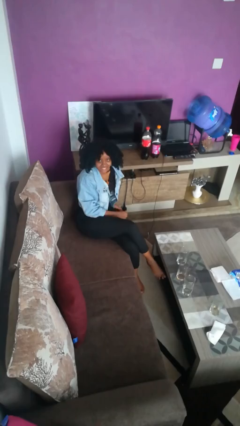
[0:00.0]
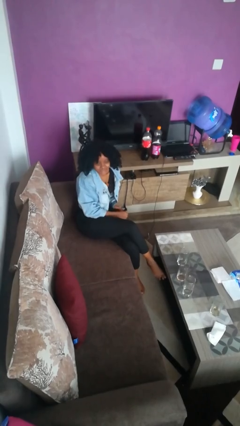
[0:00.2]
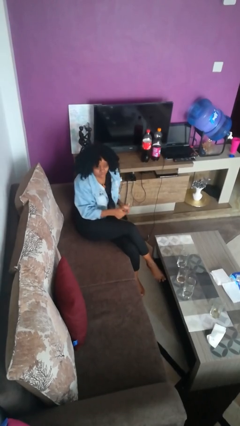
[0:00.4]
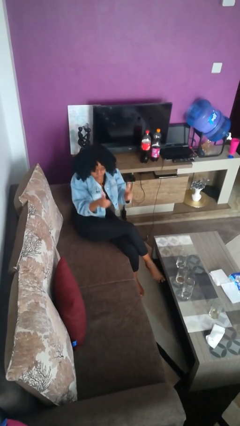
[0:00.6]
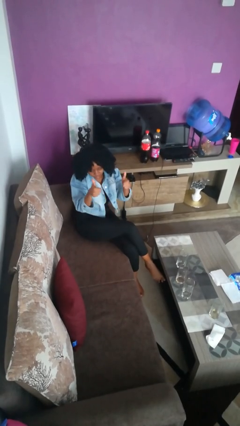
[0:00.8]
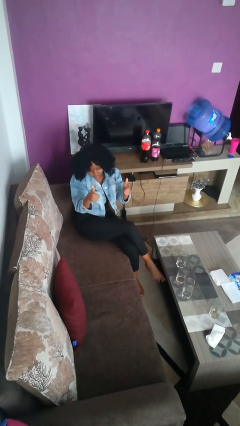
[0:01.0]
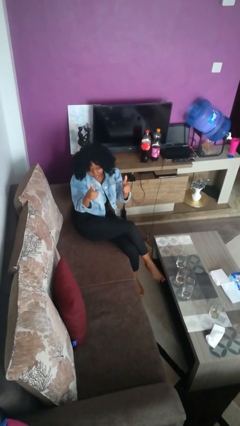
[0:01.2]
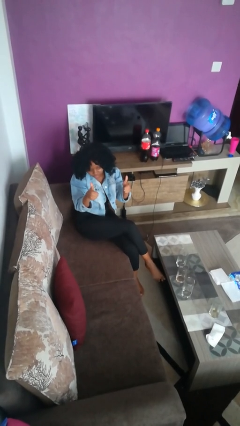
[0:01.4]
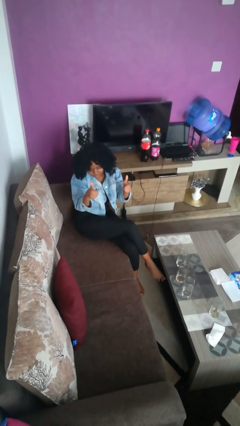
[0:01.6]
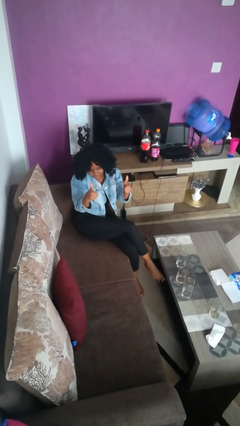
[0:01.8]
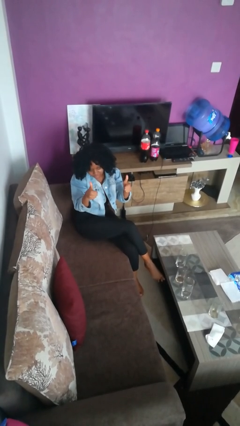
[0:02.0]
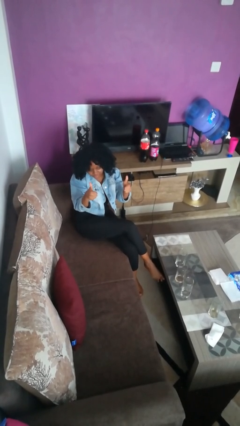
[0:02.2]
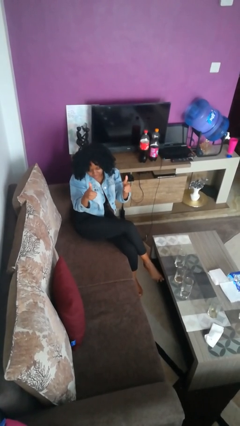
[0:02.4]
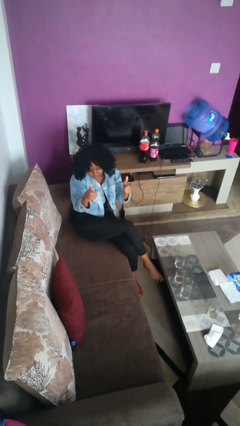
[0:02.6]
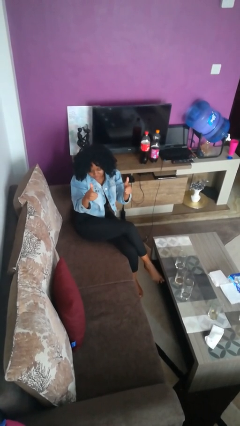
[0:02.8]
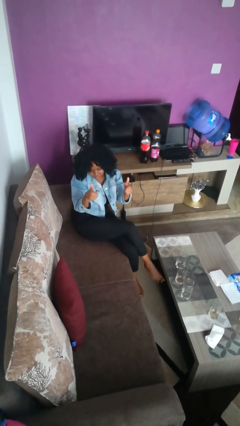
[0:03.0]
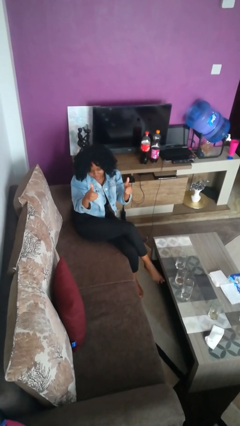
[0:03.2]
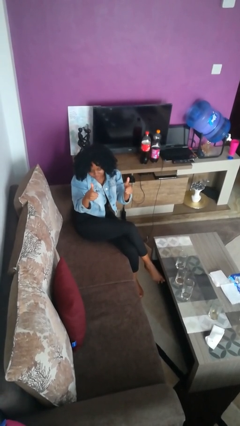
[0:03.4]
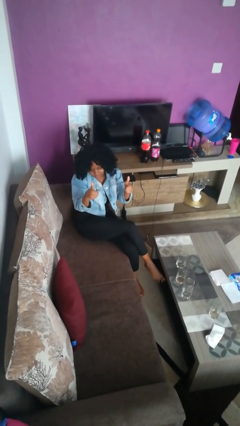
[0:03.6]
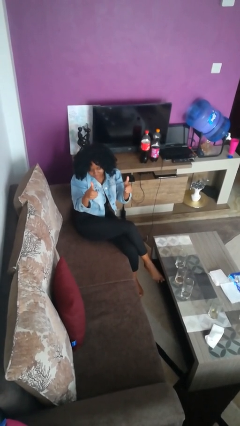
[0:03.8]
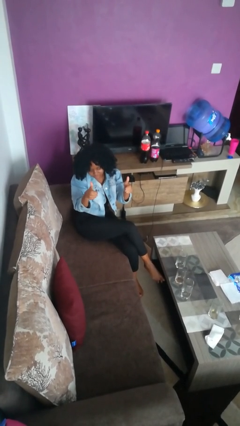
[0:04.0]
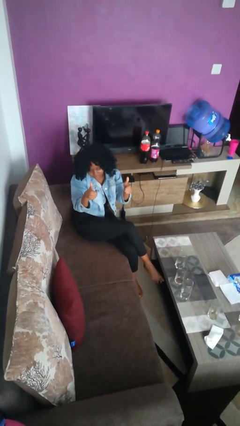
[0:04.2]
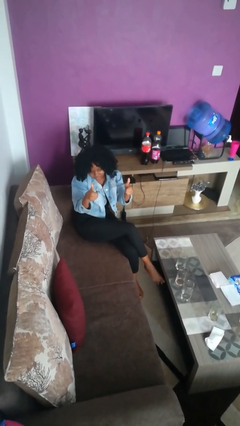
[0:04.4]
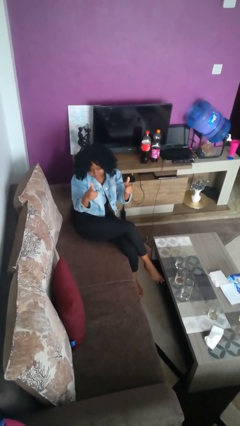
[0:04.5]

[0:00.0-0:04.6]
person gestures thumbs up

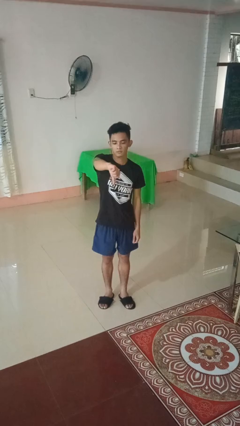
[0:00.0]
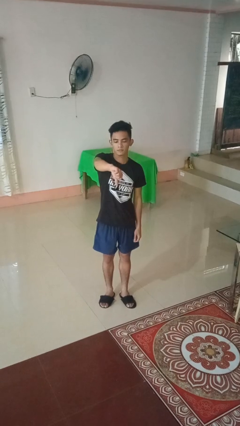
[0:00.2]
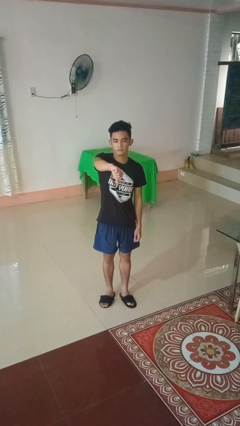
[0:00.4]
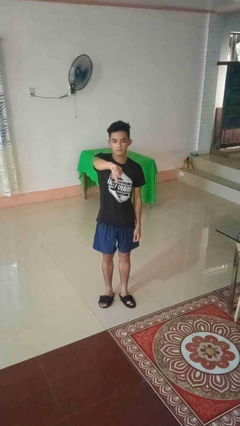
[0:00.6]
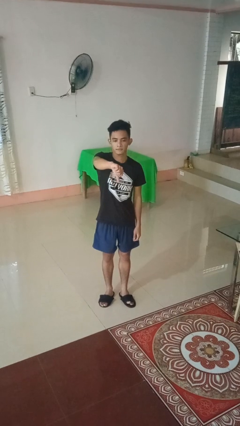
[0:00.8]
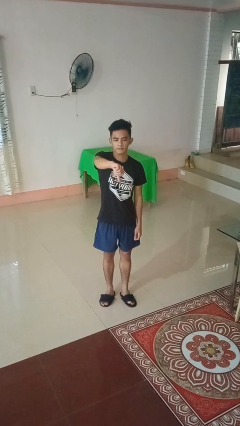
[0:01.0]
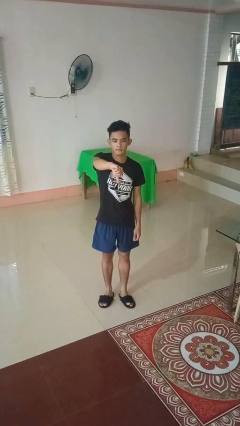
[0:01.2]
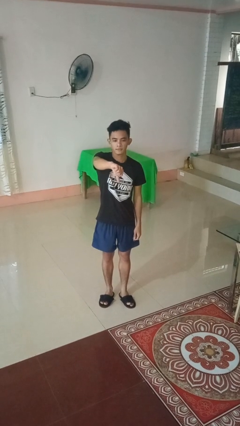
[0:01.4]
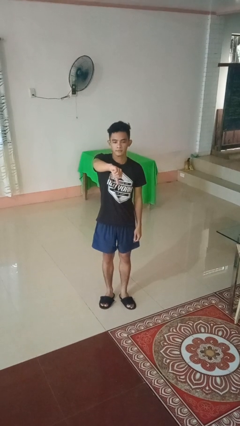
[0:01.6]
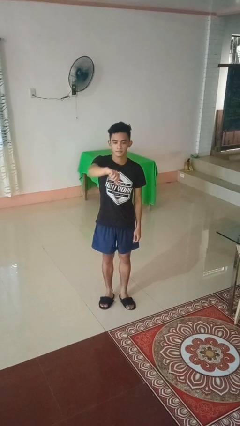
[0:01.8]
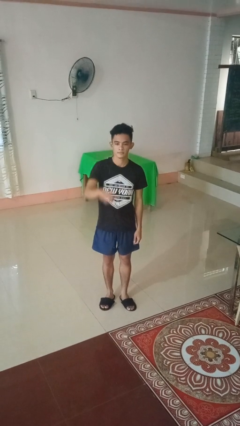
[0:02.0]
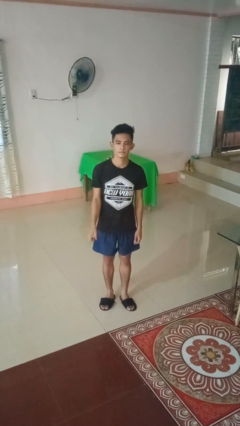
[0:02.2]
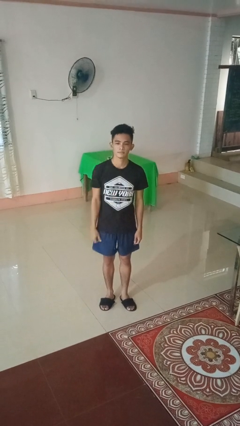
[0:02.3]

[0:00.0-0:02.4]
person gestures thumbs down

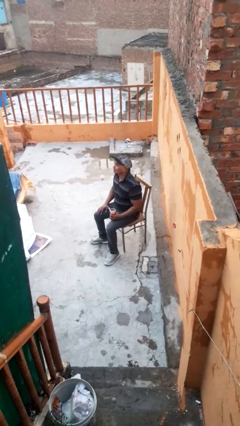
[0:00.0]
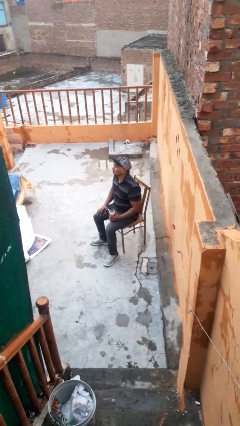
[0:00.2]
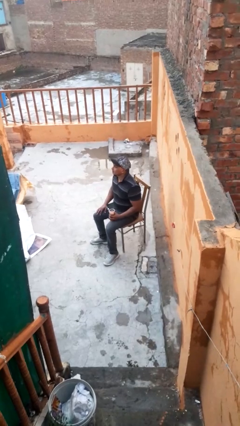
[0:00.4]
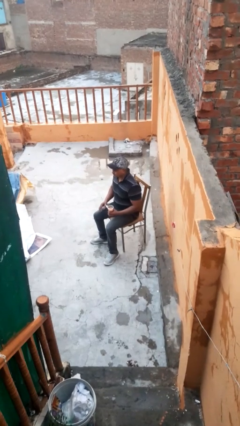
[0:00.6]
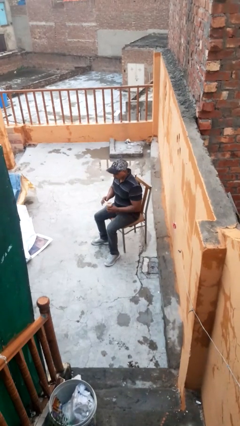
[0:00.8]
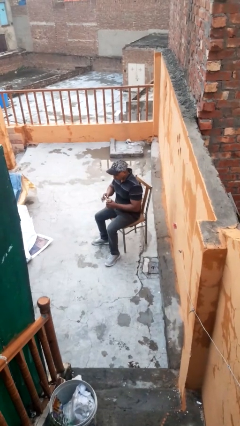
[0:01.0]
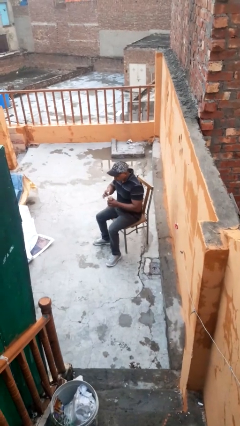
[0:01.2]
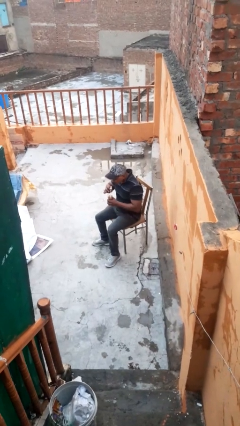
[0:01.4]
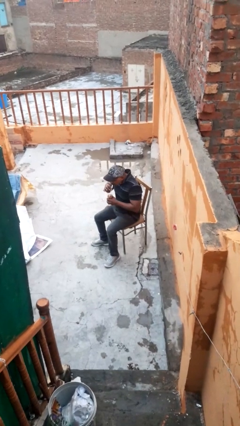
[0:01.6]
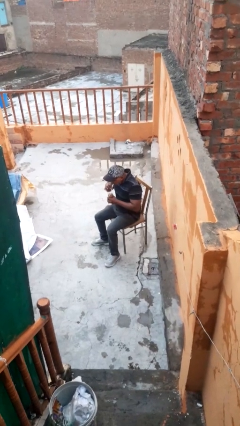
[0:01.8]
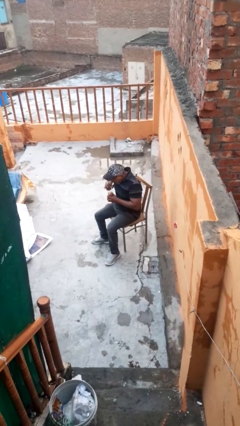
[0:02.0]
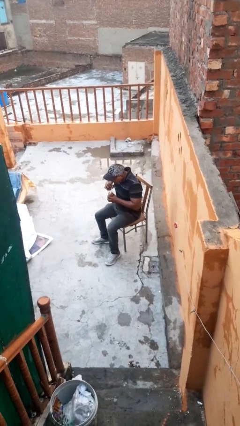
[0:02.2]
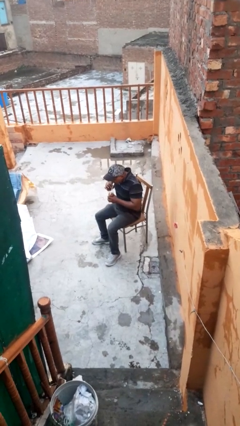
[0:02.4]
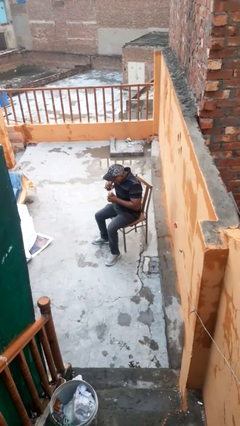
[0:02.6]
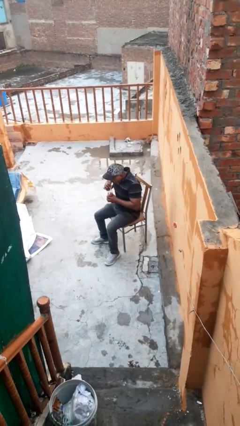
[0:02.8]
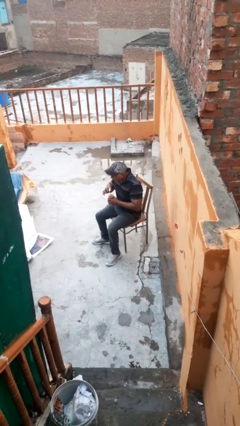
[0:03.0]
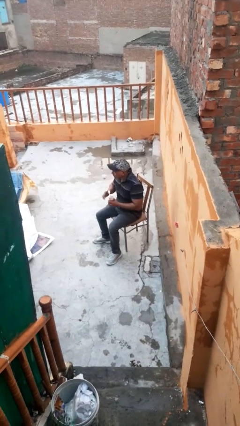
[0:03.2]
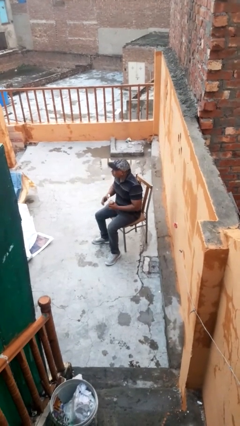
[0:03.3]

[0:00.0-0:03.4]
person drinks from straw

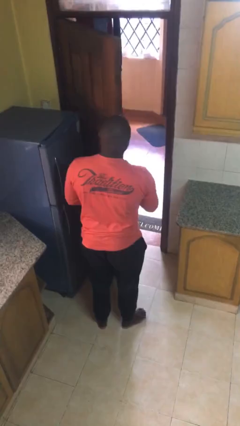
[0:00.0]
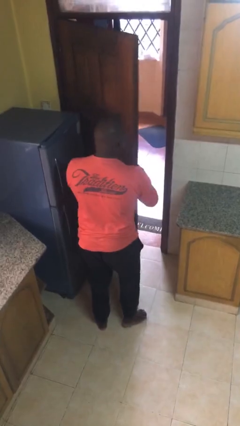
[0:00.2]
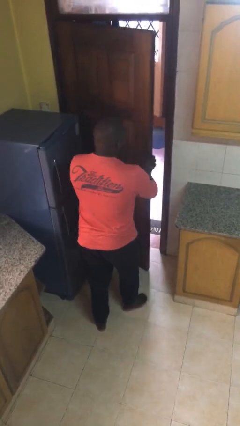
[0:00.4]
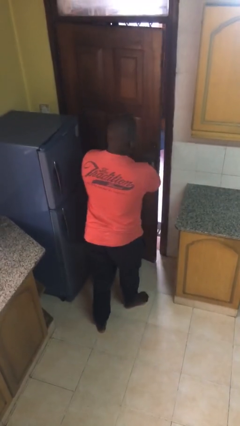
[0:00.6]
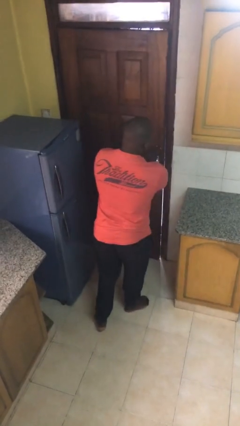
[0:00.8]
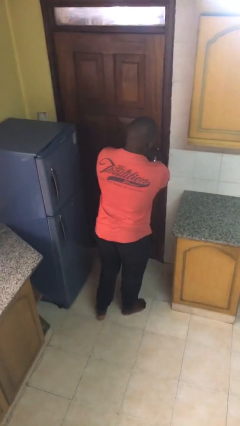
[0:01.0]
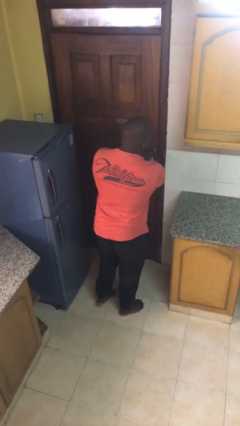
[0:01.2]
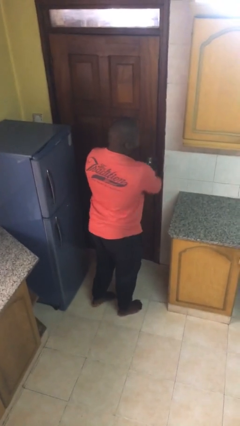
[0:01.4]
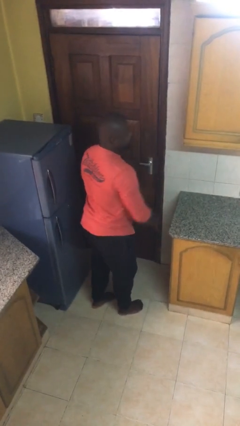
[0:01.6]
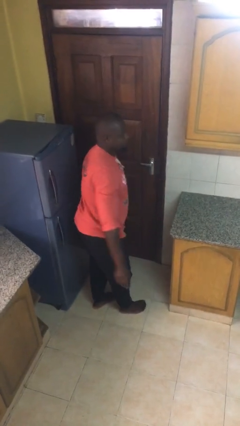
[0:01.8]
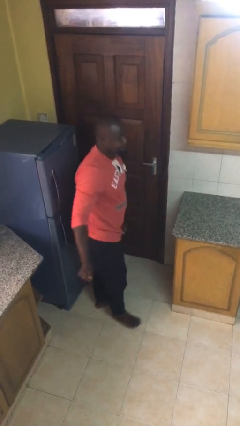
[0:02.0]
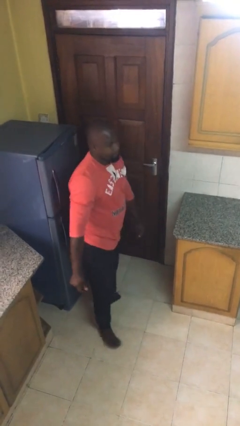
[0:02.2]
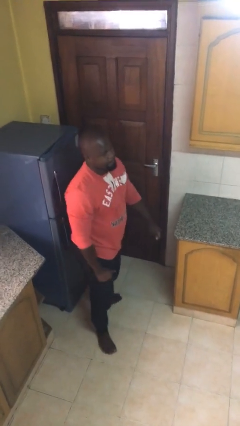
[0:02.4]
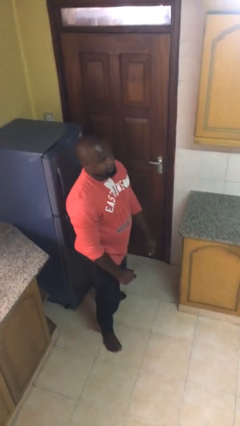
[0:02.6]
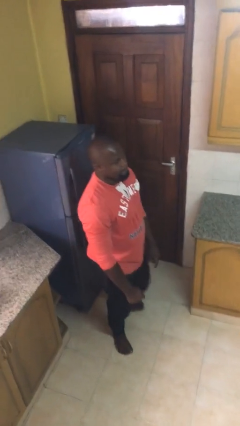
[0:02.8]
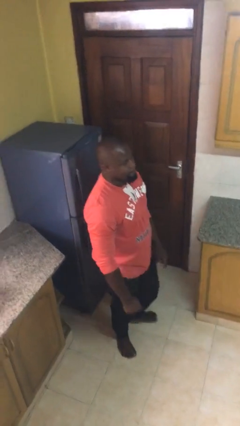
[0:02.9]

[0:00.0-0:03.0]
person closes facility door

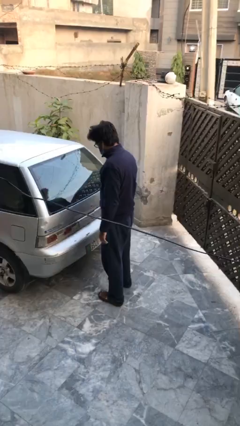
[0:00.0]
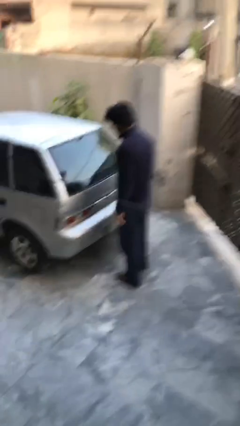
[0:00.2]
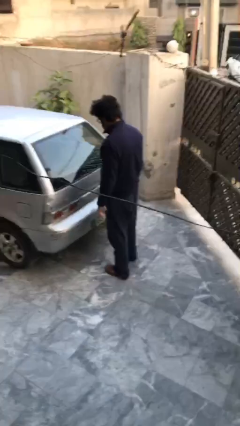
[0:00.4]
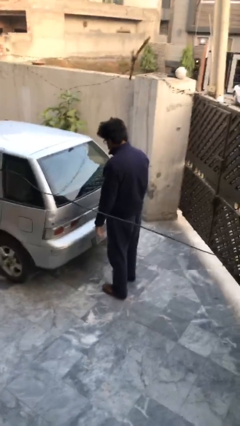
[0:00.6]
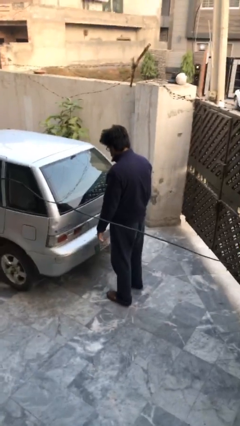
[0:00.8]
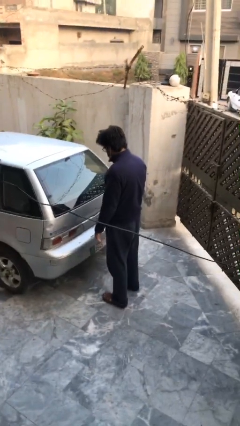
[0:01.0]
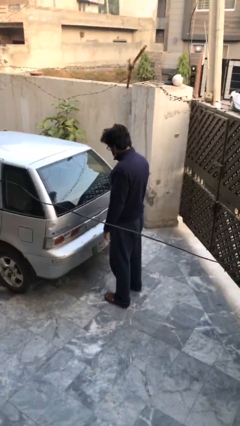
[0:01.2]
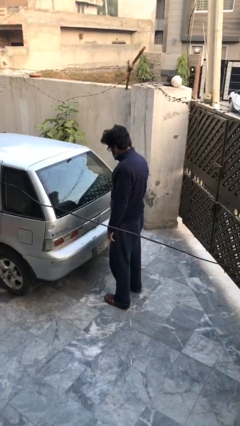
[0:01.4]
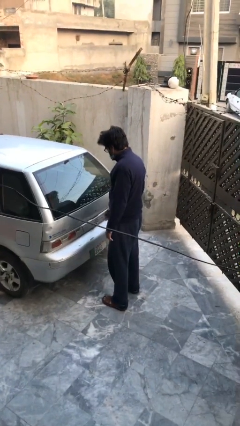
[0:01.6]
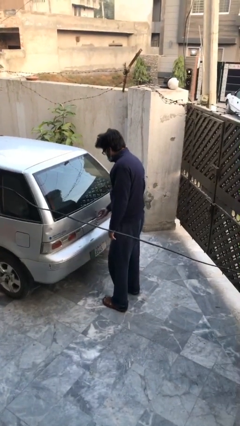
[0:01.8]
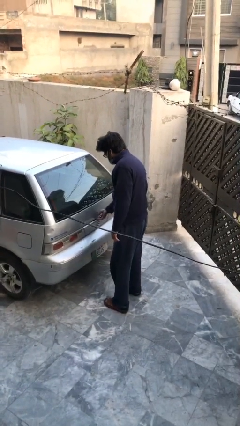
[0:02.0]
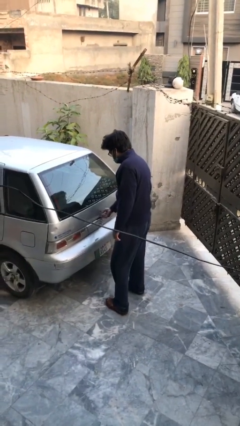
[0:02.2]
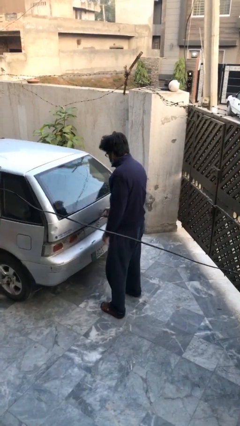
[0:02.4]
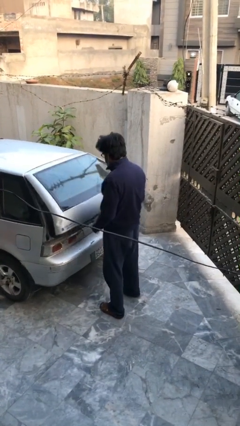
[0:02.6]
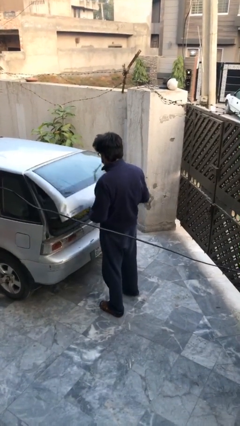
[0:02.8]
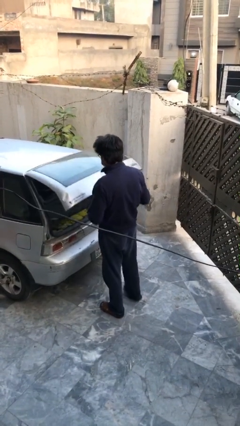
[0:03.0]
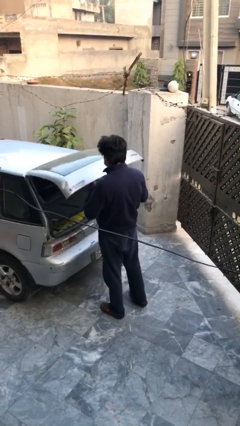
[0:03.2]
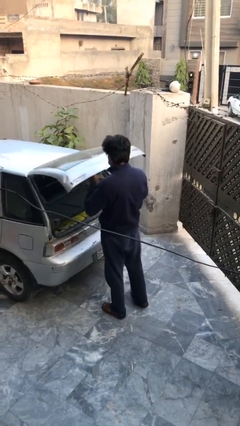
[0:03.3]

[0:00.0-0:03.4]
person opens car trunk

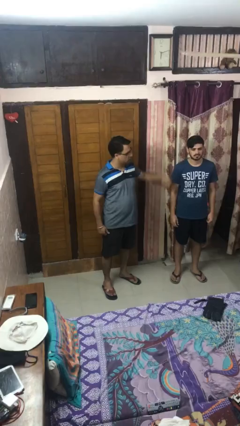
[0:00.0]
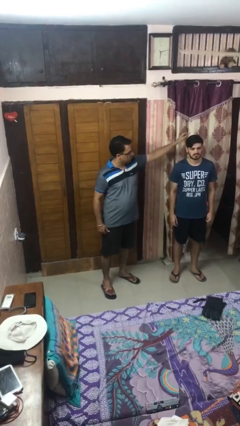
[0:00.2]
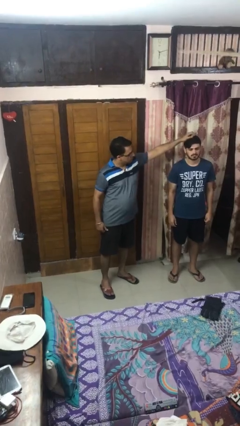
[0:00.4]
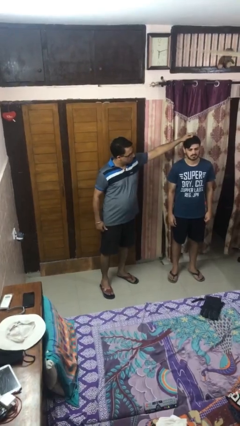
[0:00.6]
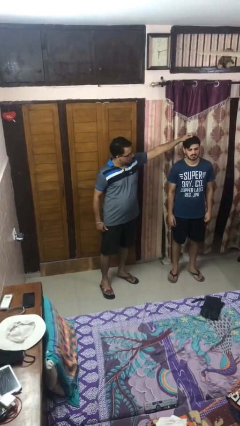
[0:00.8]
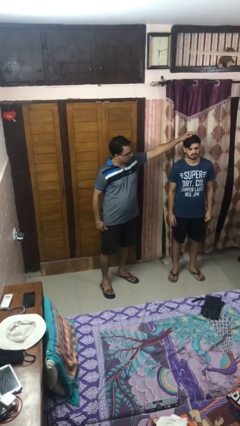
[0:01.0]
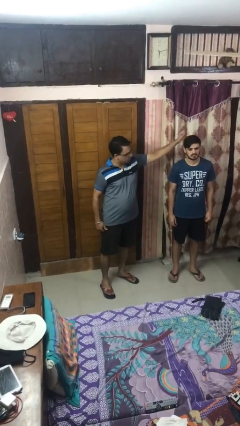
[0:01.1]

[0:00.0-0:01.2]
person grabs person by hair
